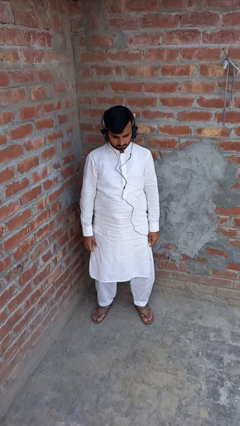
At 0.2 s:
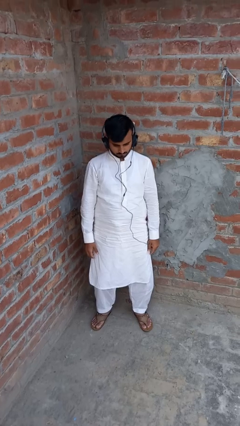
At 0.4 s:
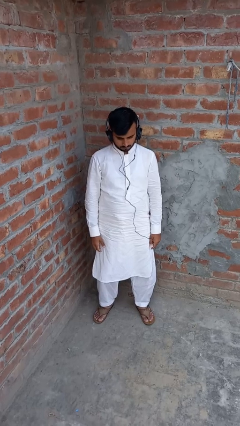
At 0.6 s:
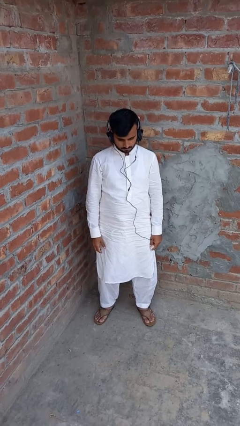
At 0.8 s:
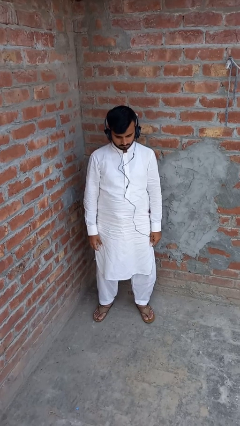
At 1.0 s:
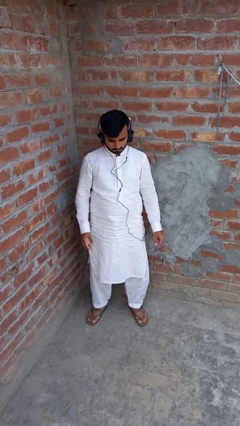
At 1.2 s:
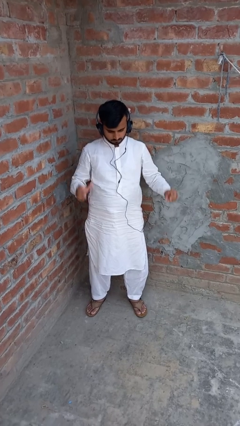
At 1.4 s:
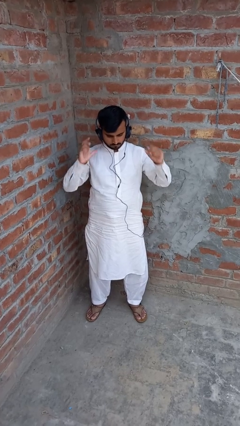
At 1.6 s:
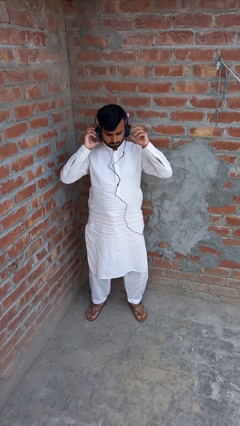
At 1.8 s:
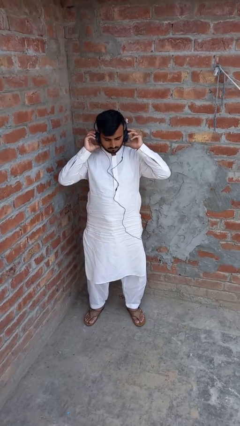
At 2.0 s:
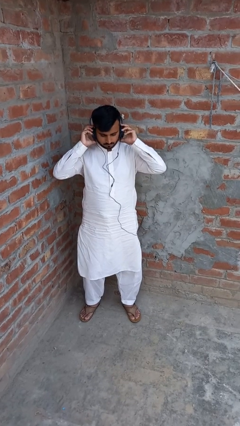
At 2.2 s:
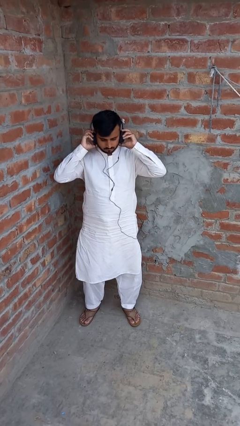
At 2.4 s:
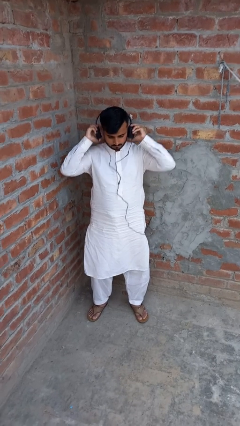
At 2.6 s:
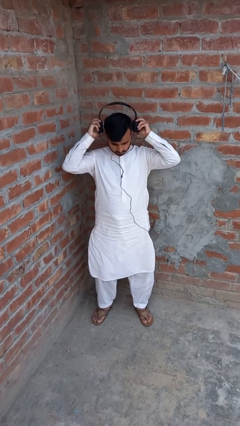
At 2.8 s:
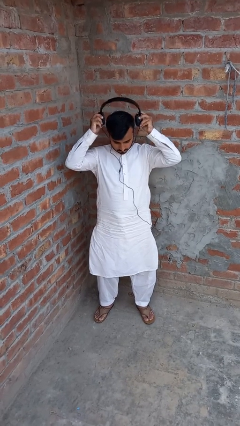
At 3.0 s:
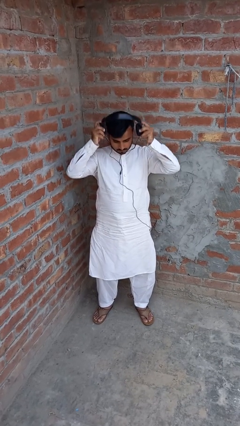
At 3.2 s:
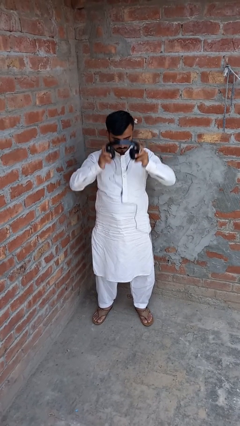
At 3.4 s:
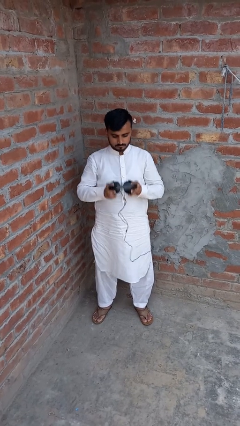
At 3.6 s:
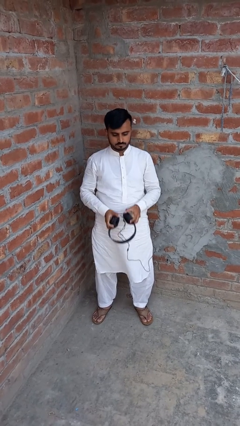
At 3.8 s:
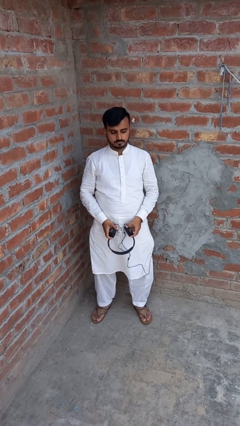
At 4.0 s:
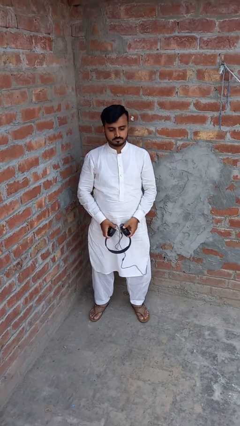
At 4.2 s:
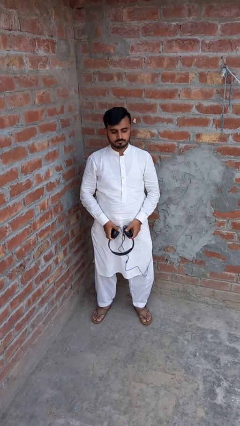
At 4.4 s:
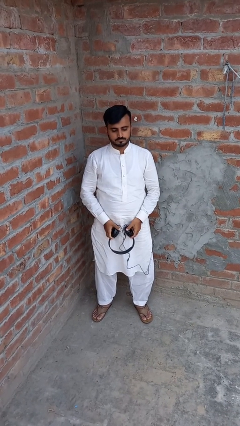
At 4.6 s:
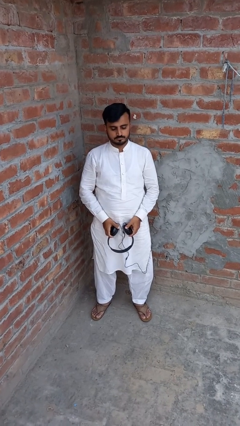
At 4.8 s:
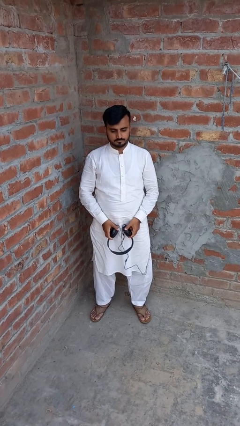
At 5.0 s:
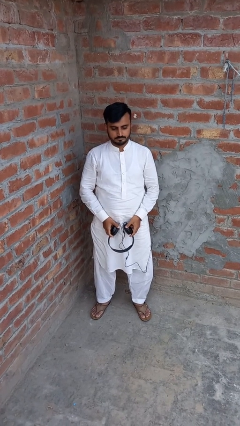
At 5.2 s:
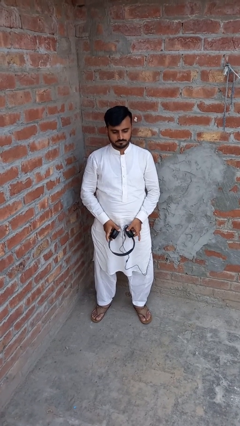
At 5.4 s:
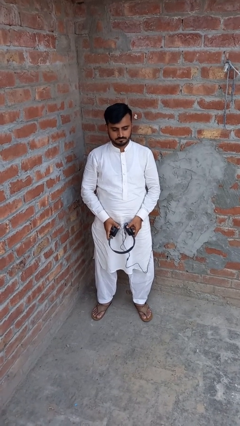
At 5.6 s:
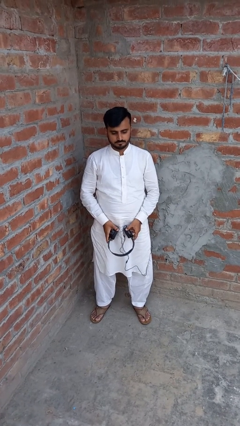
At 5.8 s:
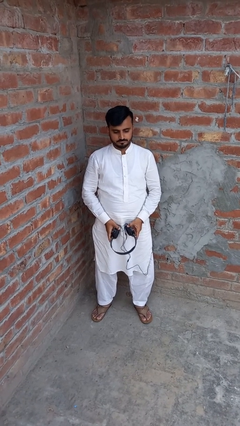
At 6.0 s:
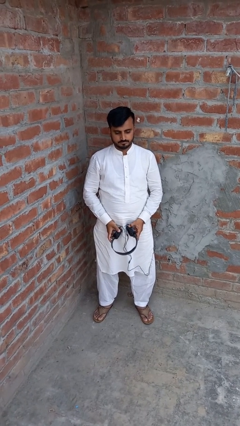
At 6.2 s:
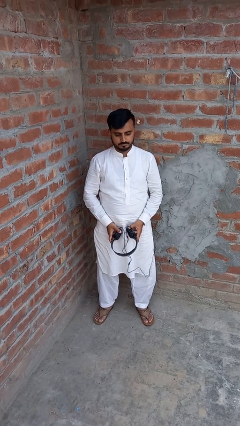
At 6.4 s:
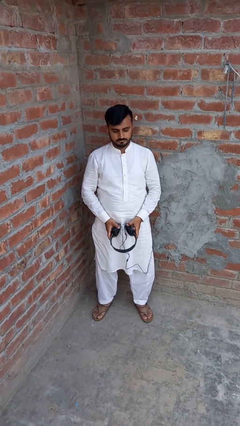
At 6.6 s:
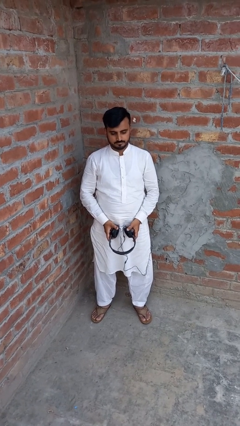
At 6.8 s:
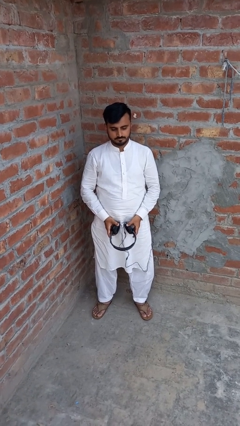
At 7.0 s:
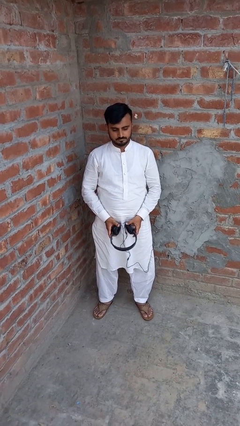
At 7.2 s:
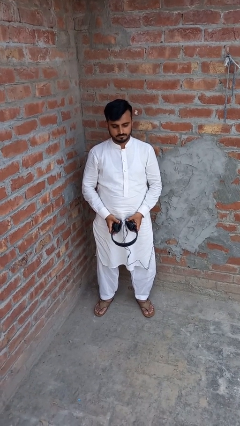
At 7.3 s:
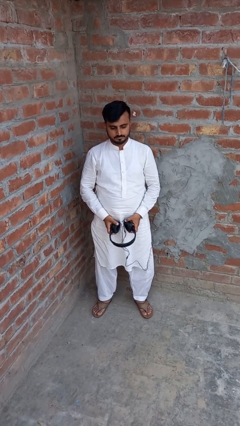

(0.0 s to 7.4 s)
person takes off headphones

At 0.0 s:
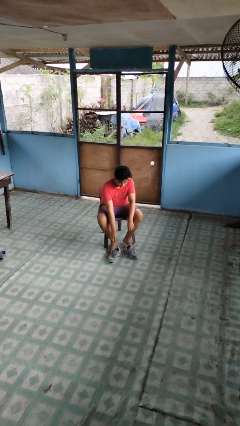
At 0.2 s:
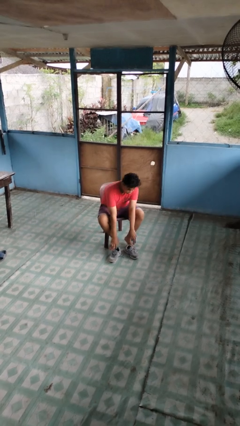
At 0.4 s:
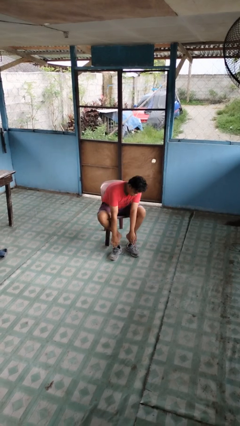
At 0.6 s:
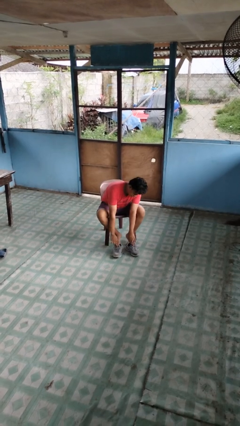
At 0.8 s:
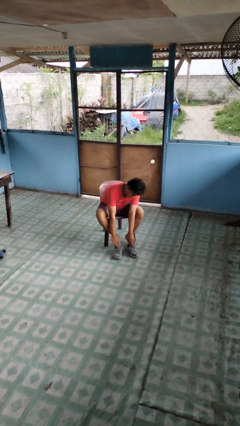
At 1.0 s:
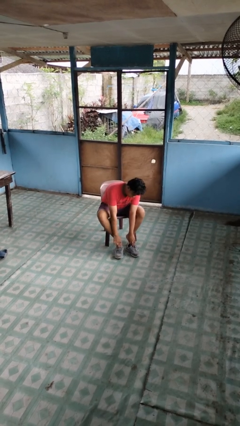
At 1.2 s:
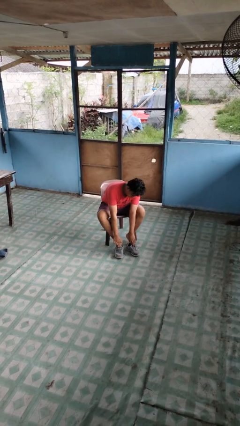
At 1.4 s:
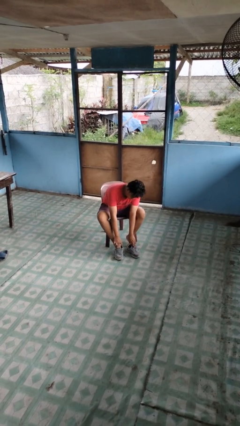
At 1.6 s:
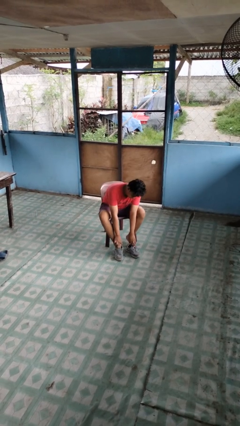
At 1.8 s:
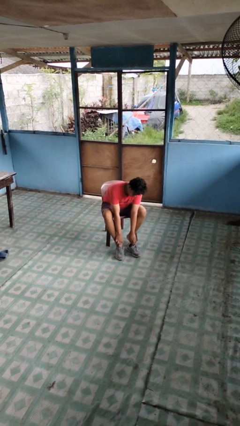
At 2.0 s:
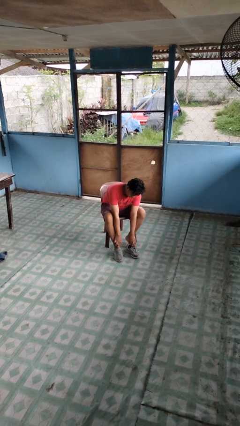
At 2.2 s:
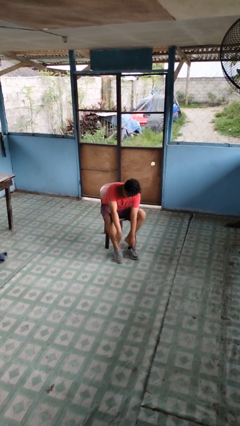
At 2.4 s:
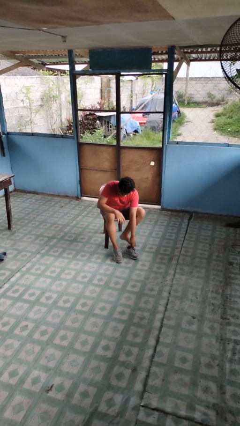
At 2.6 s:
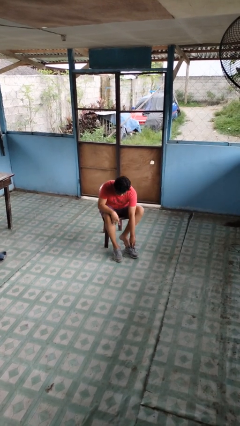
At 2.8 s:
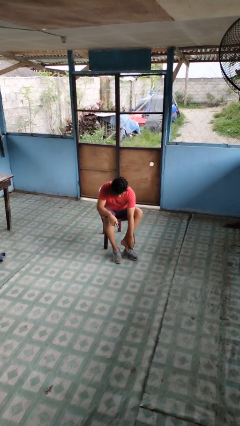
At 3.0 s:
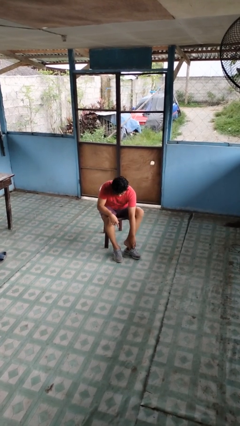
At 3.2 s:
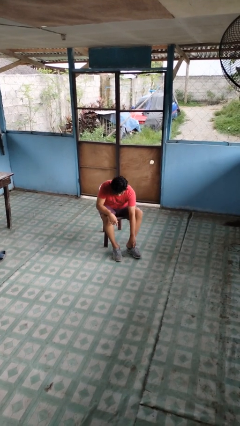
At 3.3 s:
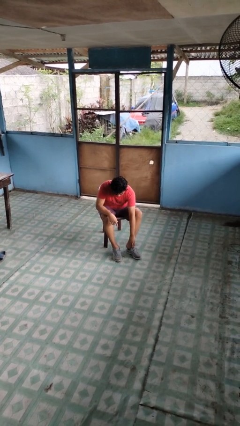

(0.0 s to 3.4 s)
person puts on shoes

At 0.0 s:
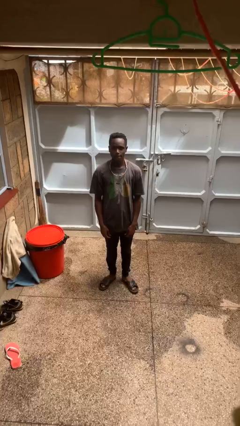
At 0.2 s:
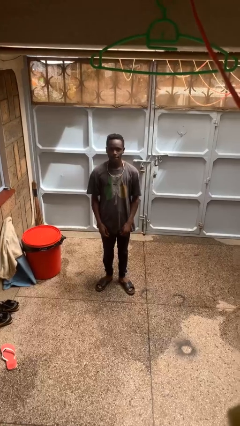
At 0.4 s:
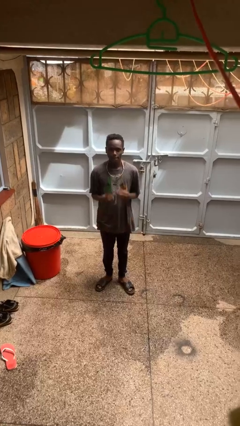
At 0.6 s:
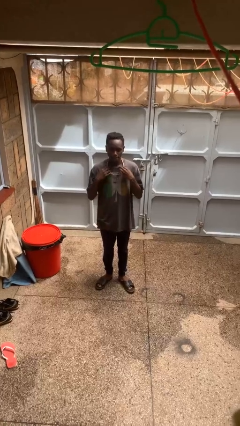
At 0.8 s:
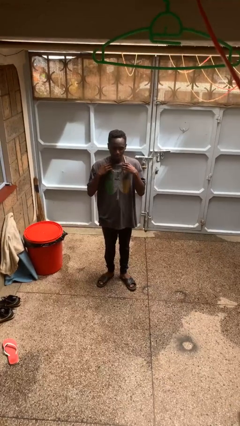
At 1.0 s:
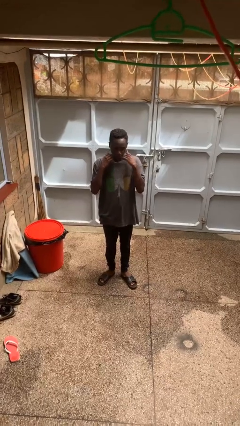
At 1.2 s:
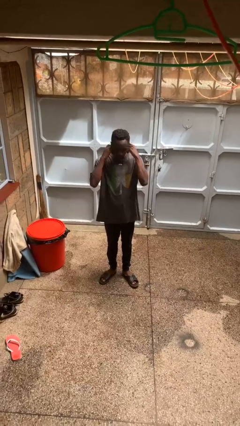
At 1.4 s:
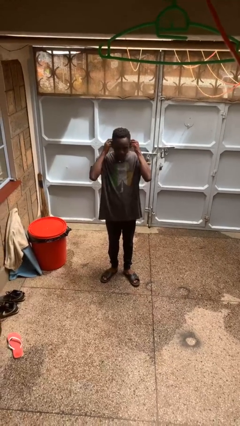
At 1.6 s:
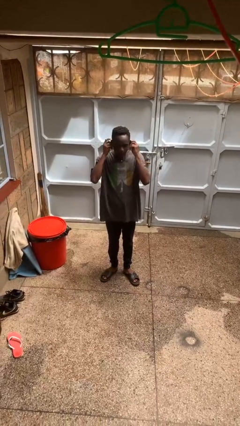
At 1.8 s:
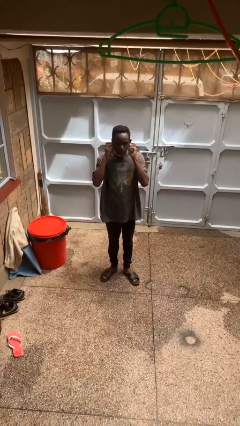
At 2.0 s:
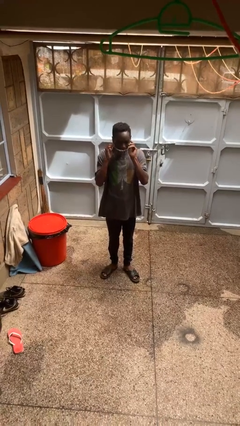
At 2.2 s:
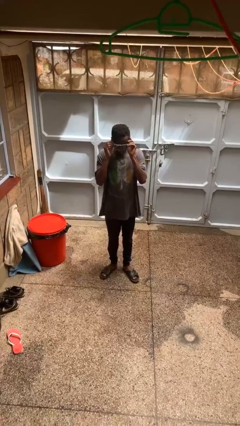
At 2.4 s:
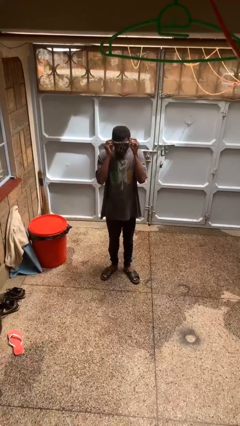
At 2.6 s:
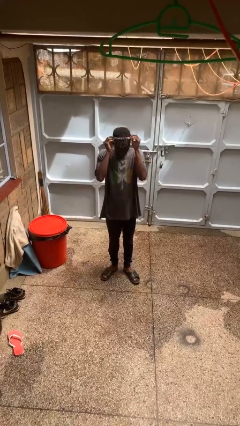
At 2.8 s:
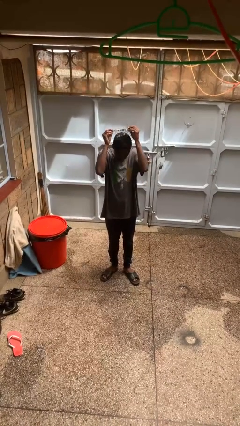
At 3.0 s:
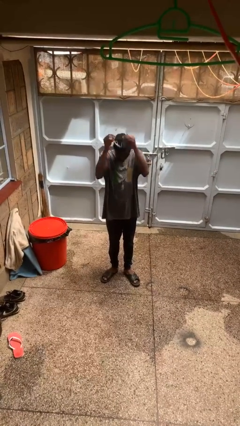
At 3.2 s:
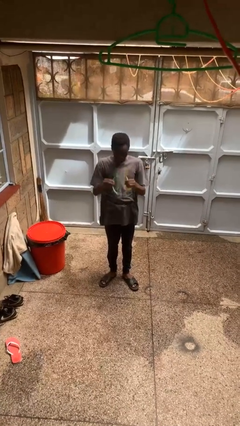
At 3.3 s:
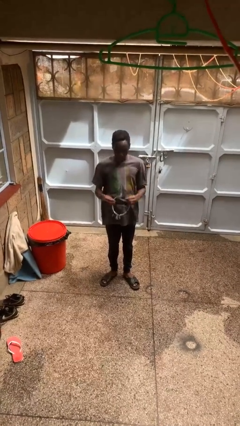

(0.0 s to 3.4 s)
person takes off necklace

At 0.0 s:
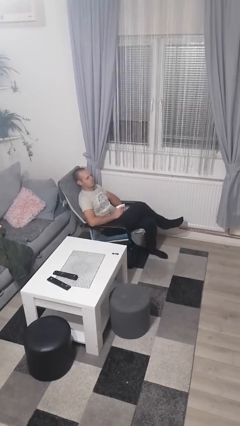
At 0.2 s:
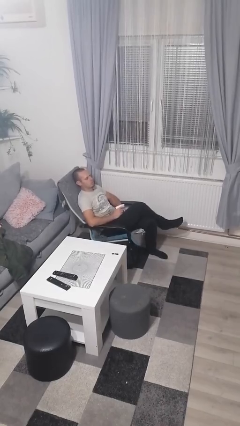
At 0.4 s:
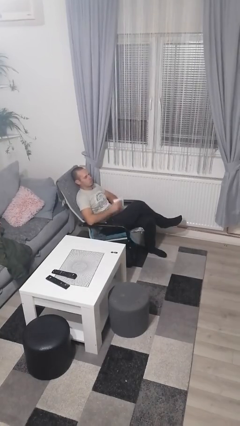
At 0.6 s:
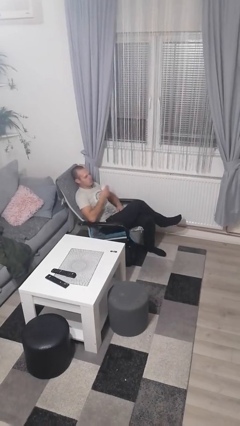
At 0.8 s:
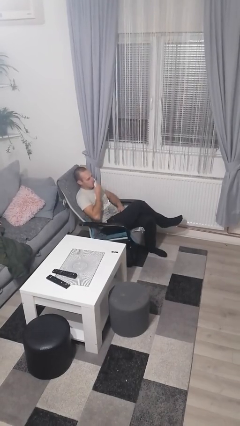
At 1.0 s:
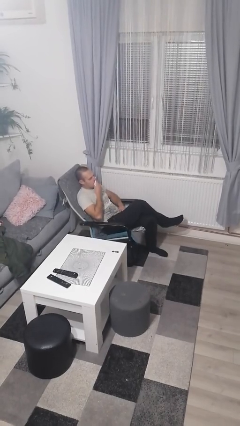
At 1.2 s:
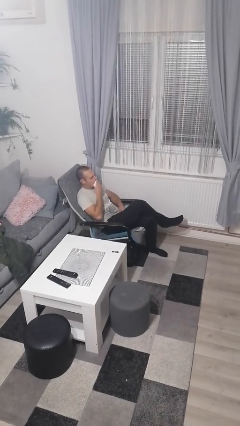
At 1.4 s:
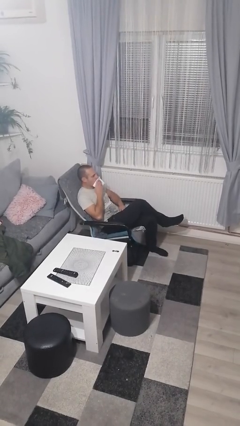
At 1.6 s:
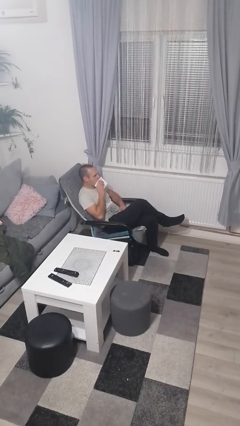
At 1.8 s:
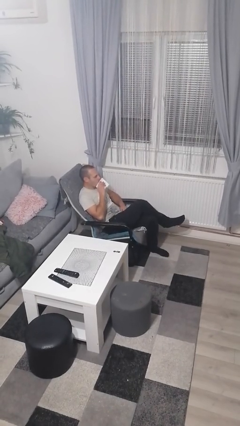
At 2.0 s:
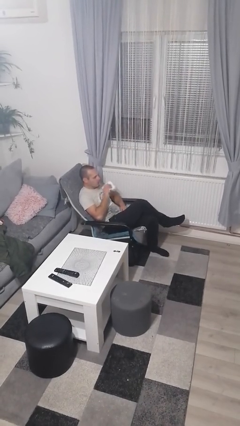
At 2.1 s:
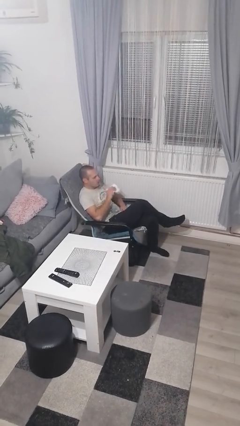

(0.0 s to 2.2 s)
person wipes mouth with napkin

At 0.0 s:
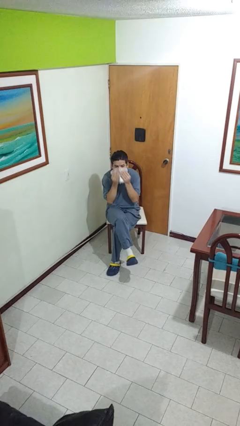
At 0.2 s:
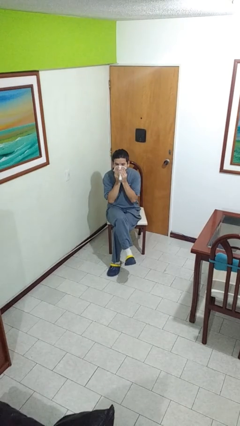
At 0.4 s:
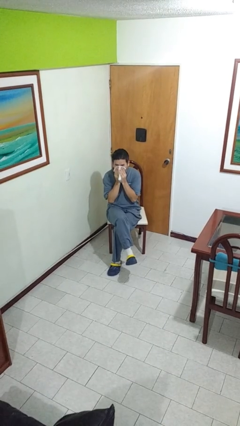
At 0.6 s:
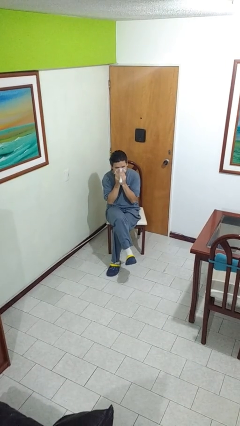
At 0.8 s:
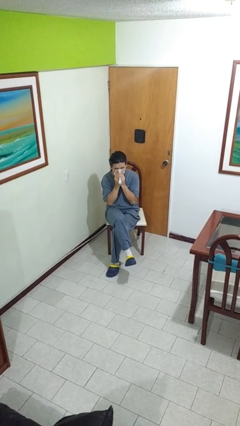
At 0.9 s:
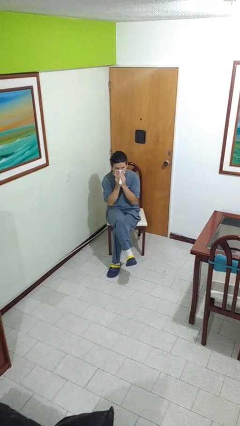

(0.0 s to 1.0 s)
person blows nose

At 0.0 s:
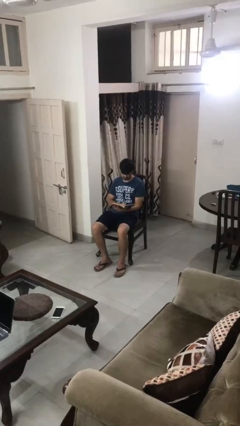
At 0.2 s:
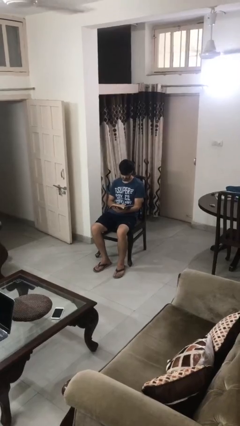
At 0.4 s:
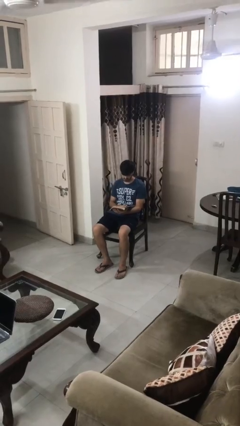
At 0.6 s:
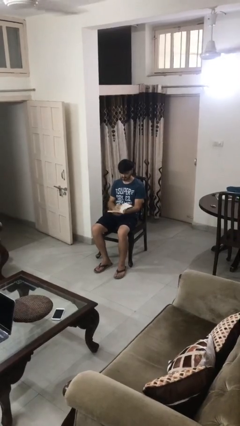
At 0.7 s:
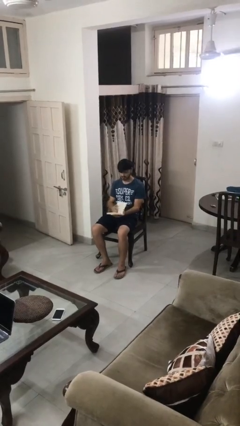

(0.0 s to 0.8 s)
person reads book
